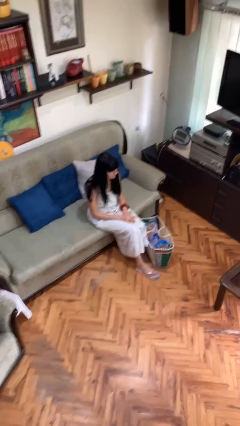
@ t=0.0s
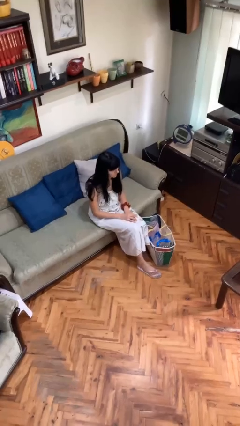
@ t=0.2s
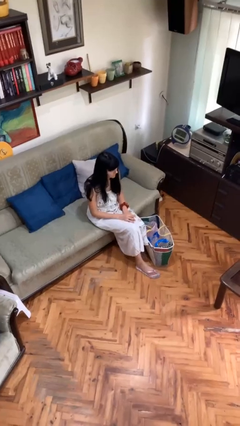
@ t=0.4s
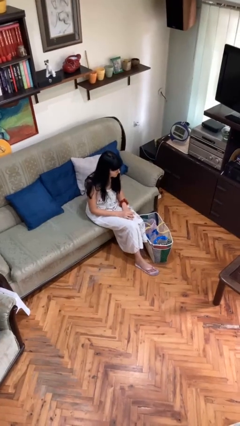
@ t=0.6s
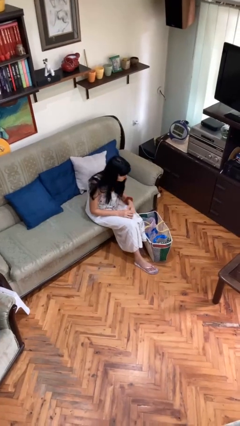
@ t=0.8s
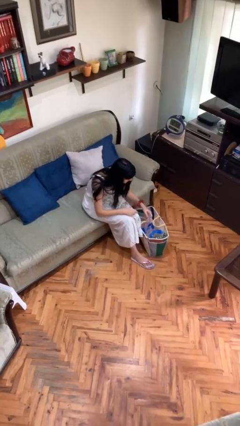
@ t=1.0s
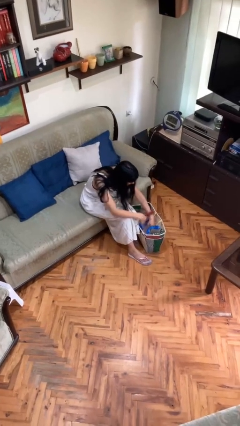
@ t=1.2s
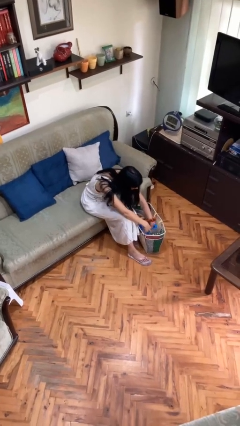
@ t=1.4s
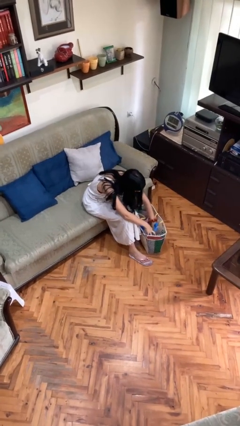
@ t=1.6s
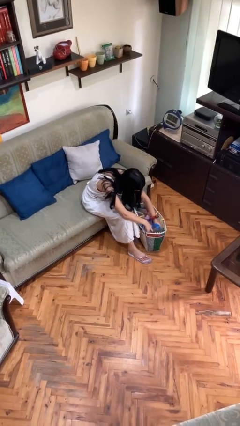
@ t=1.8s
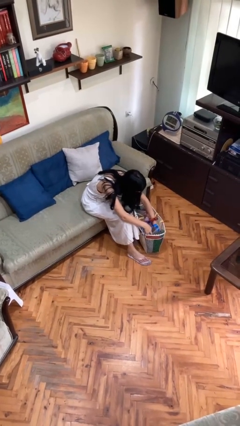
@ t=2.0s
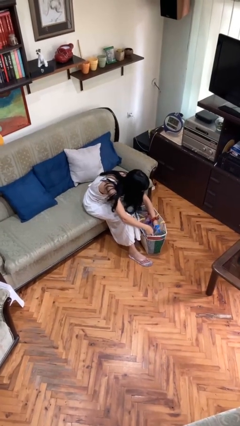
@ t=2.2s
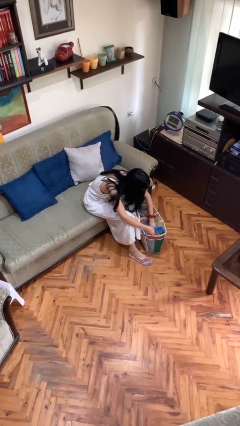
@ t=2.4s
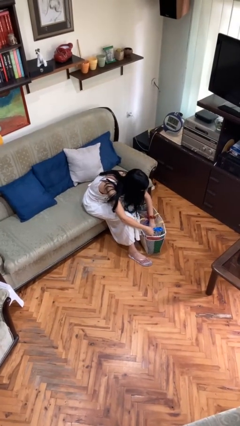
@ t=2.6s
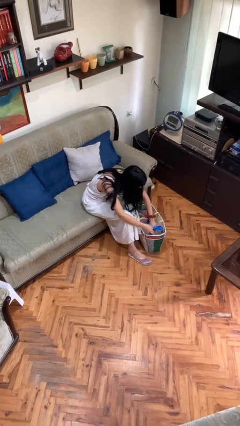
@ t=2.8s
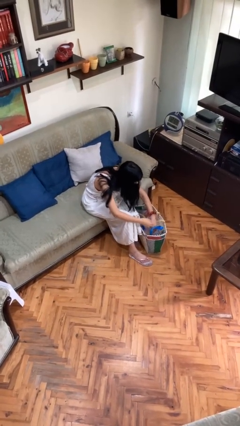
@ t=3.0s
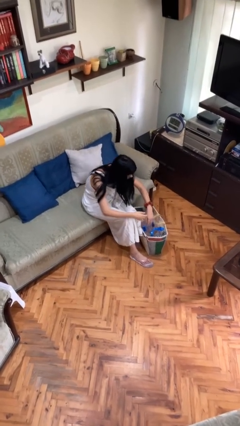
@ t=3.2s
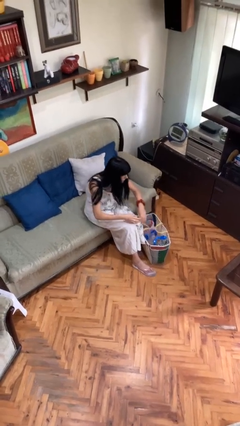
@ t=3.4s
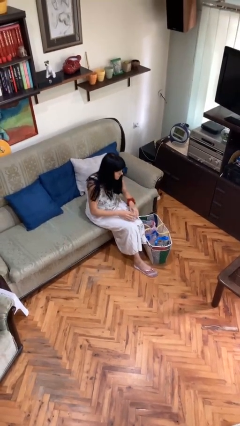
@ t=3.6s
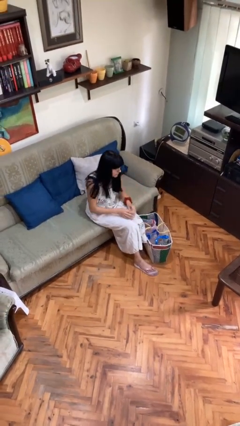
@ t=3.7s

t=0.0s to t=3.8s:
person searches in bag

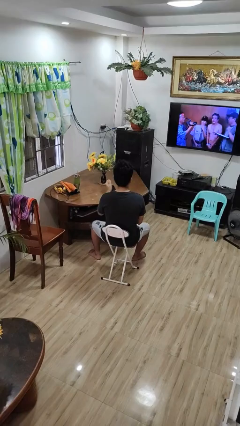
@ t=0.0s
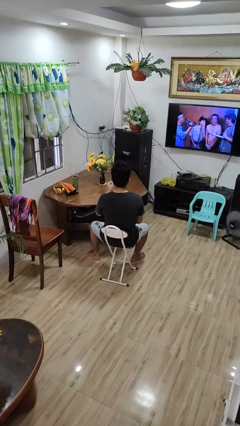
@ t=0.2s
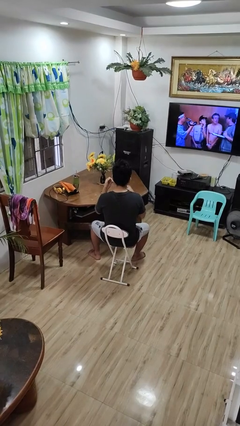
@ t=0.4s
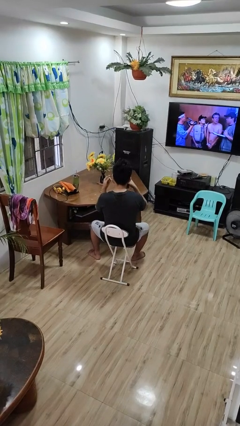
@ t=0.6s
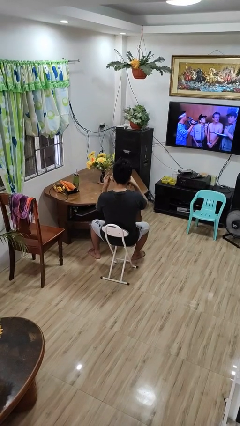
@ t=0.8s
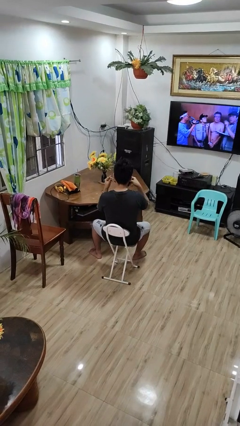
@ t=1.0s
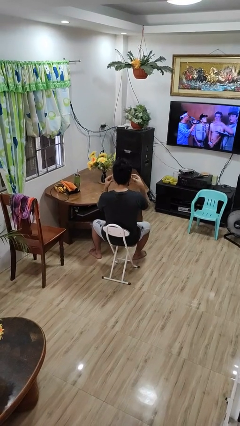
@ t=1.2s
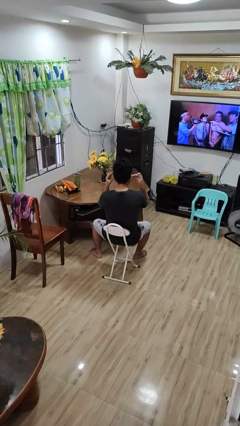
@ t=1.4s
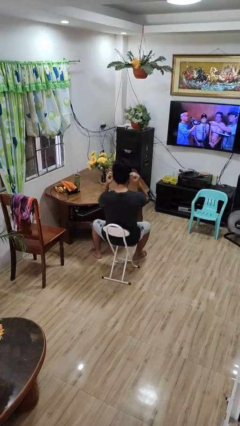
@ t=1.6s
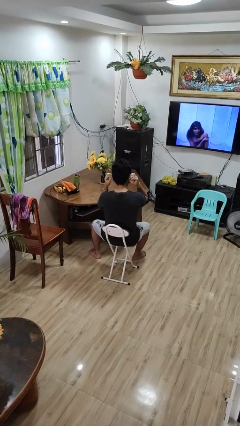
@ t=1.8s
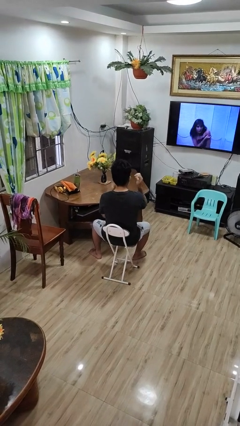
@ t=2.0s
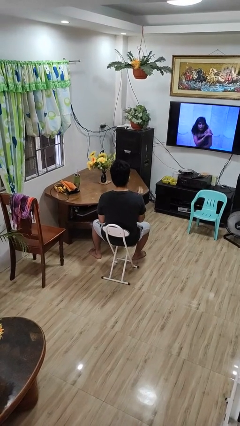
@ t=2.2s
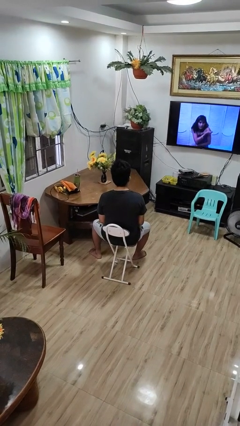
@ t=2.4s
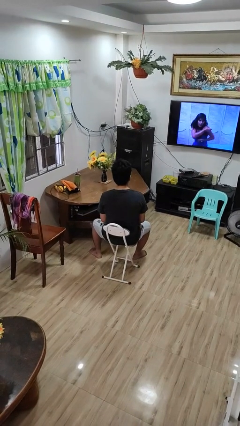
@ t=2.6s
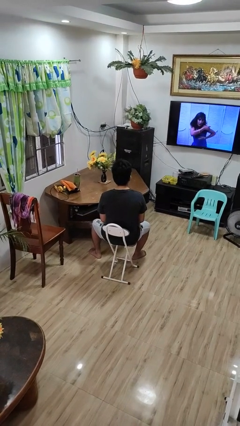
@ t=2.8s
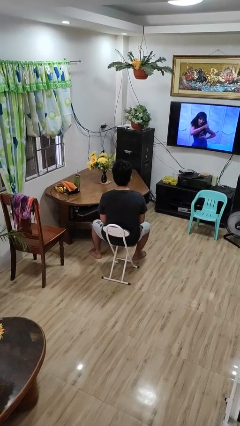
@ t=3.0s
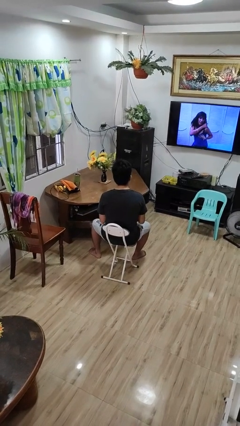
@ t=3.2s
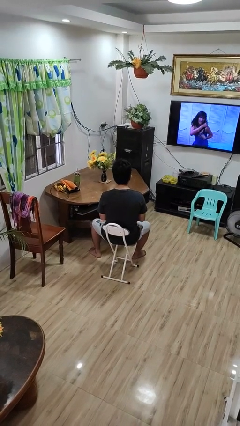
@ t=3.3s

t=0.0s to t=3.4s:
person puts on facemask

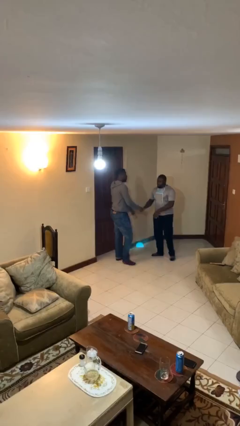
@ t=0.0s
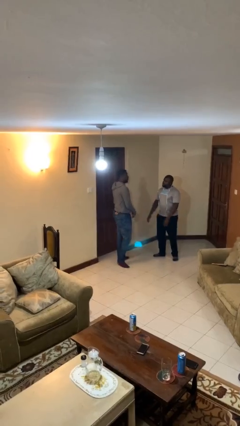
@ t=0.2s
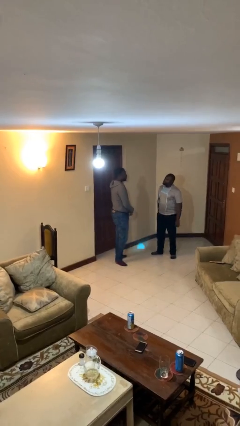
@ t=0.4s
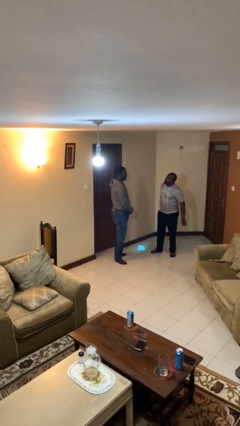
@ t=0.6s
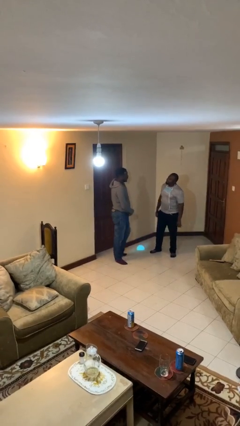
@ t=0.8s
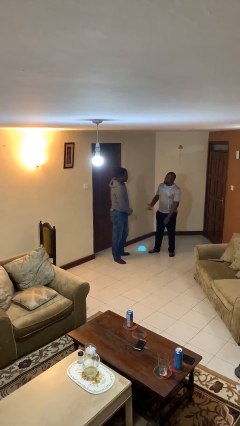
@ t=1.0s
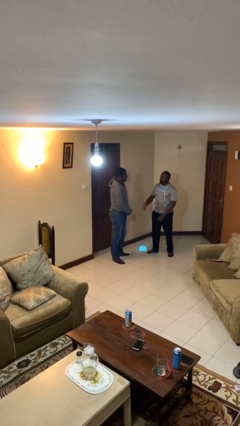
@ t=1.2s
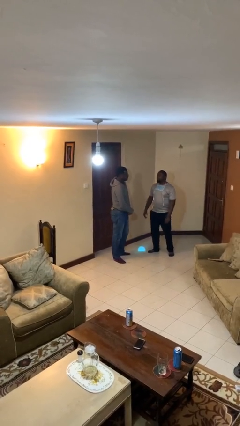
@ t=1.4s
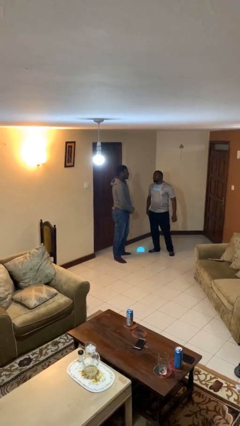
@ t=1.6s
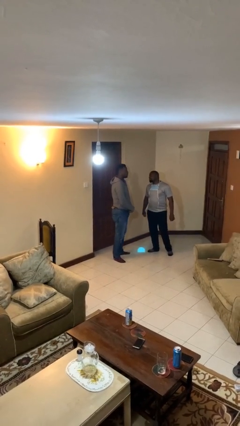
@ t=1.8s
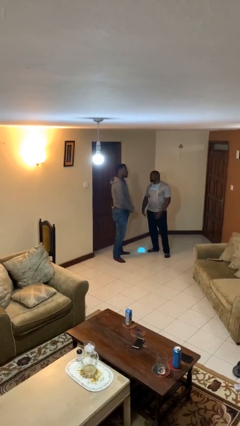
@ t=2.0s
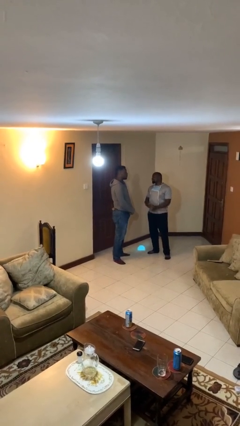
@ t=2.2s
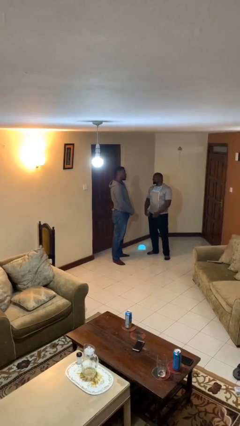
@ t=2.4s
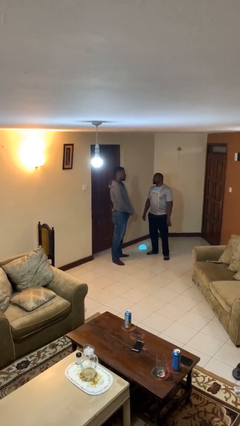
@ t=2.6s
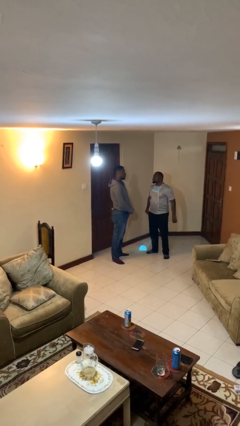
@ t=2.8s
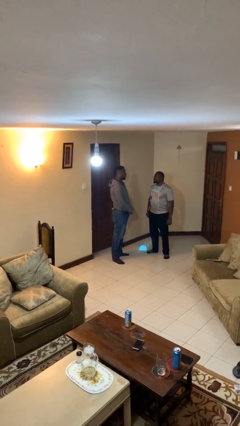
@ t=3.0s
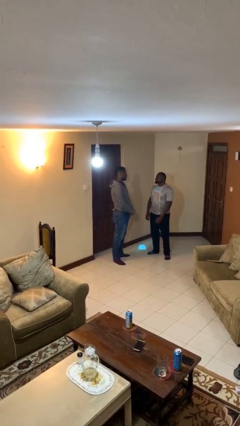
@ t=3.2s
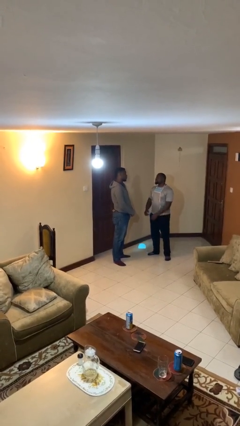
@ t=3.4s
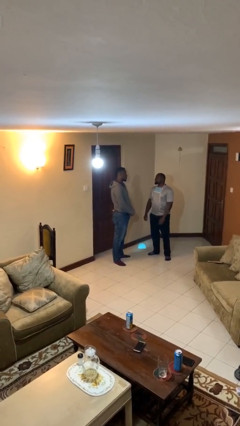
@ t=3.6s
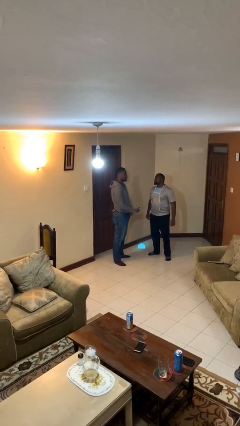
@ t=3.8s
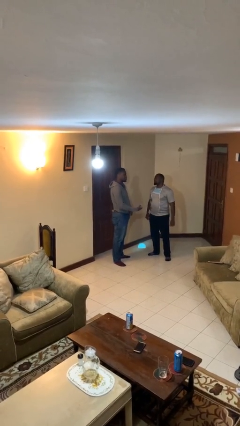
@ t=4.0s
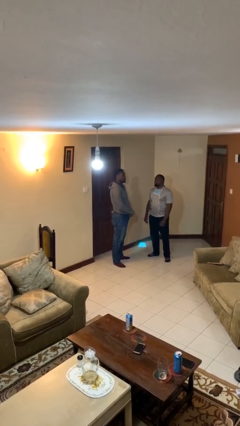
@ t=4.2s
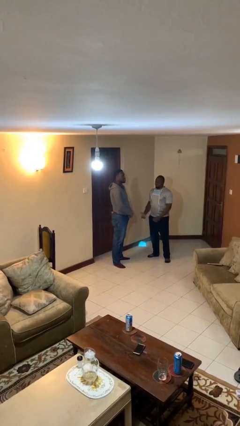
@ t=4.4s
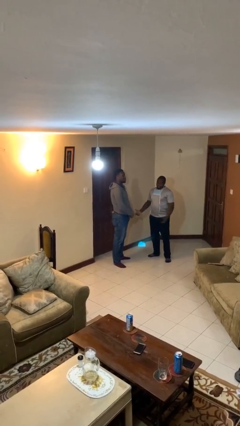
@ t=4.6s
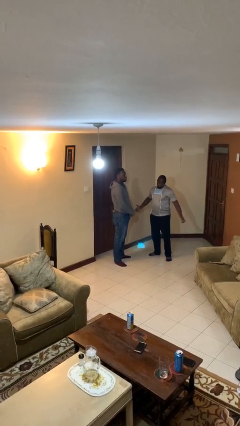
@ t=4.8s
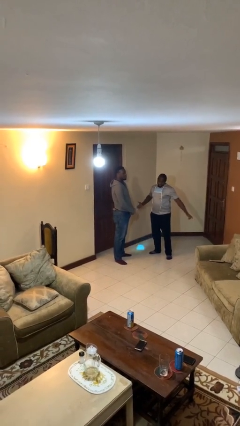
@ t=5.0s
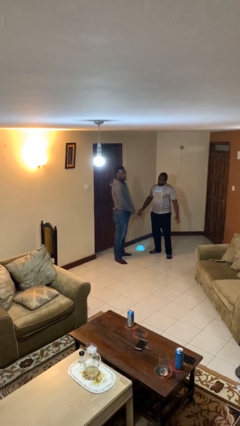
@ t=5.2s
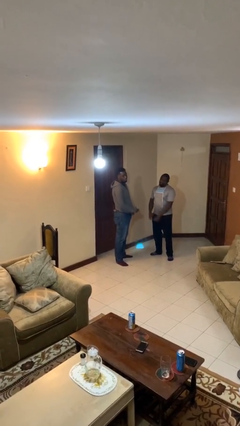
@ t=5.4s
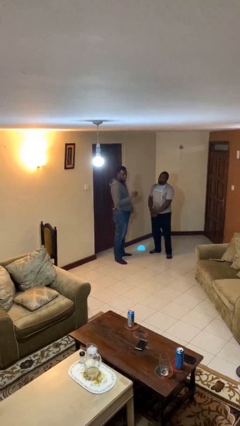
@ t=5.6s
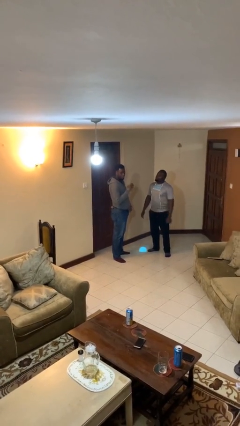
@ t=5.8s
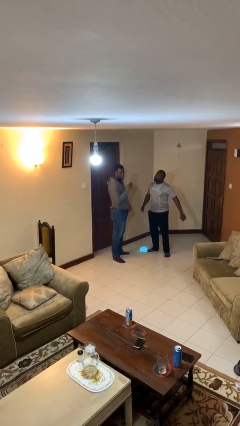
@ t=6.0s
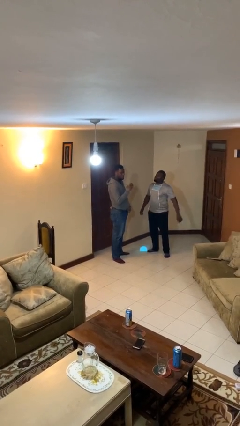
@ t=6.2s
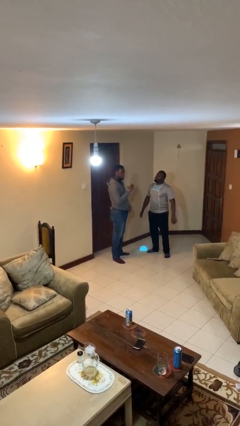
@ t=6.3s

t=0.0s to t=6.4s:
person talks to person

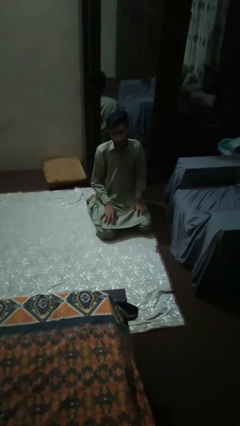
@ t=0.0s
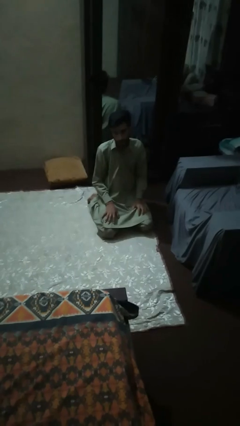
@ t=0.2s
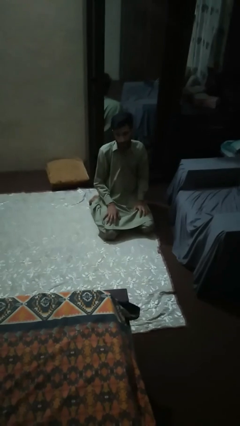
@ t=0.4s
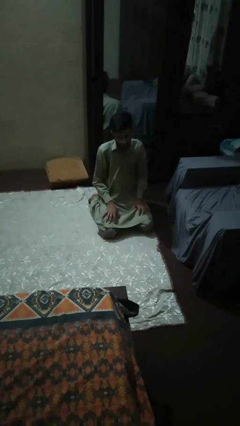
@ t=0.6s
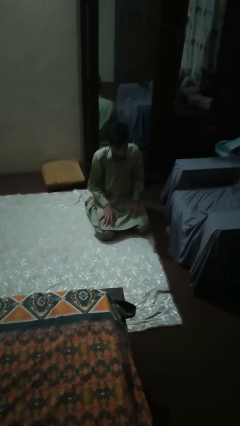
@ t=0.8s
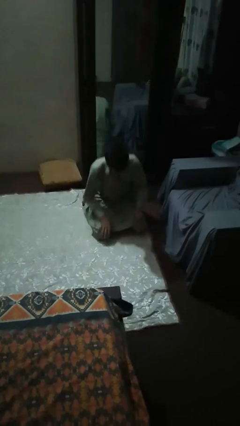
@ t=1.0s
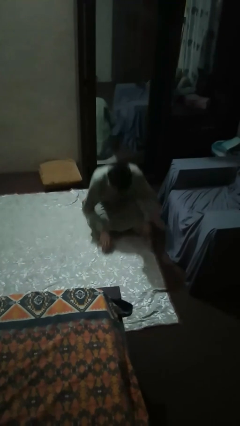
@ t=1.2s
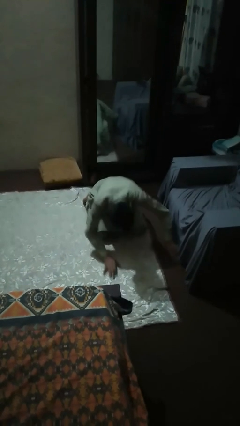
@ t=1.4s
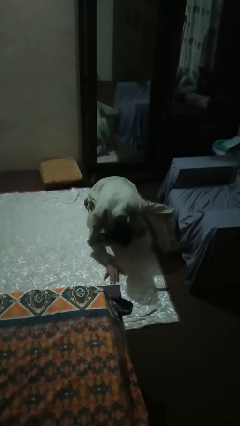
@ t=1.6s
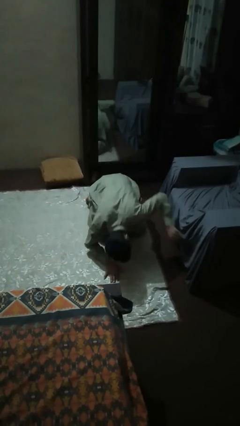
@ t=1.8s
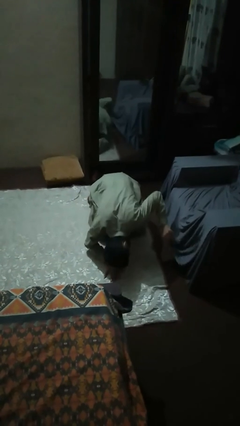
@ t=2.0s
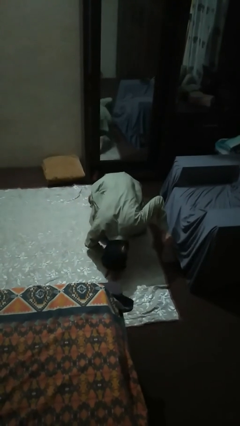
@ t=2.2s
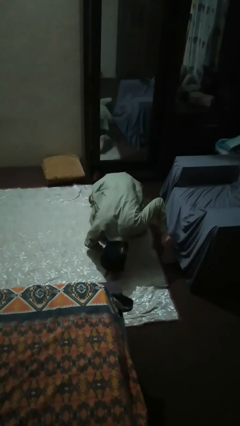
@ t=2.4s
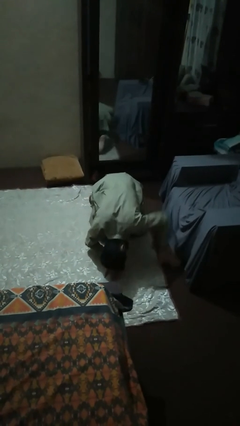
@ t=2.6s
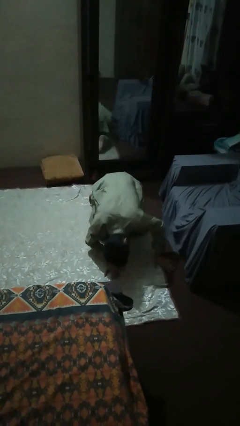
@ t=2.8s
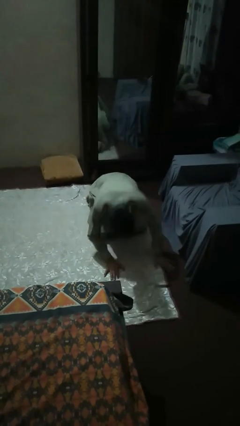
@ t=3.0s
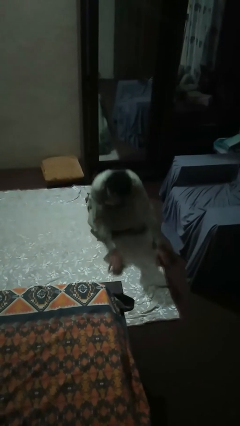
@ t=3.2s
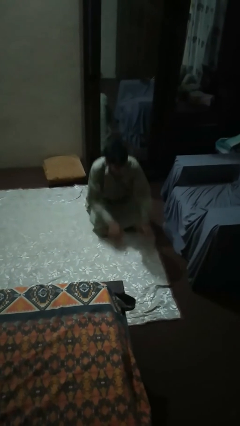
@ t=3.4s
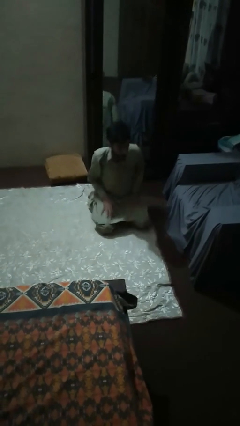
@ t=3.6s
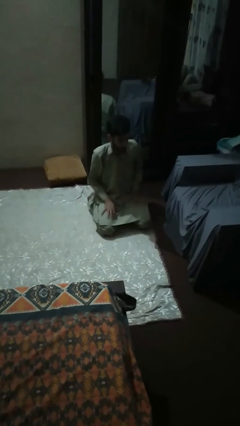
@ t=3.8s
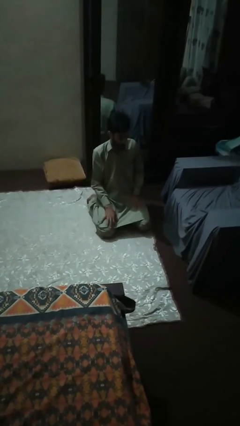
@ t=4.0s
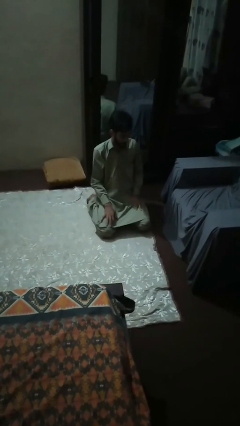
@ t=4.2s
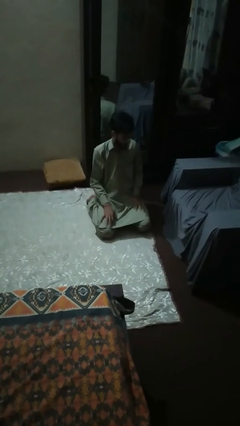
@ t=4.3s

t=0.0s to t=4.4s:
person searches under couch
